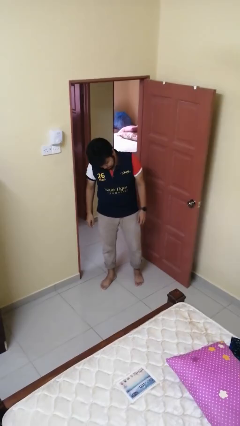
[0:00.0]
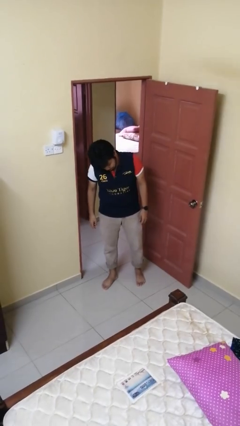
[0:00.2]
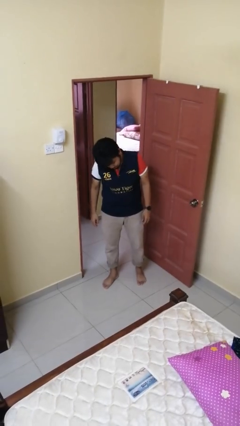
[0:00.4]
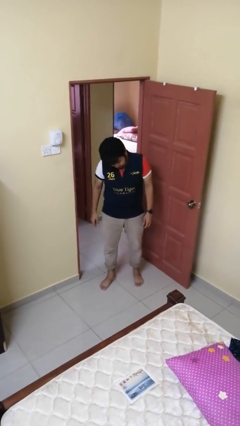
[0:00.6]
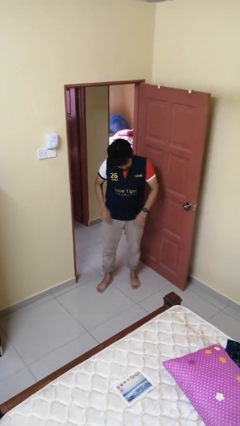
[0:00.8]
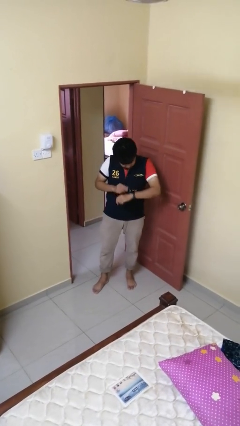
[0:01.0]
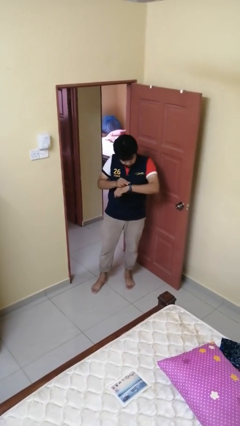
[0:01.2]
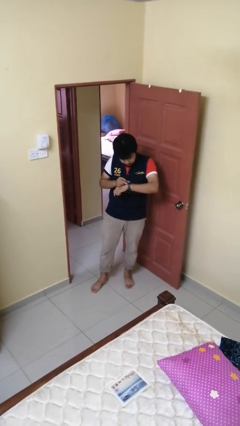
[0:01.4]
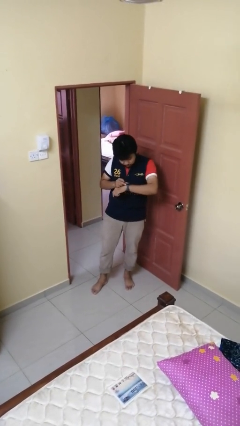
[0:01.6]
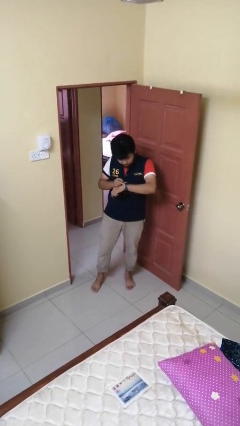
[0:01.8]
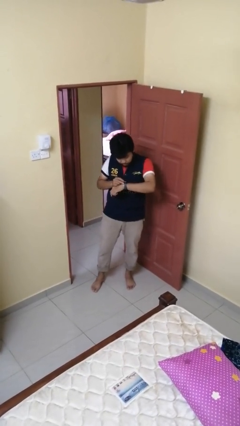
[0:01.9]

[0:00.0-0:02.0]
person looks at wristwatch

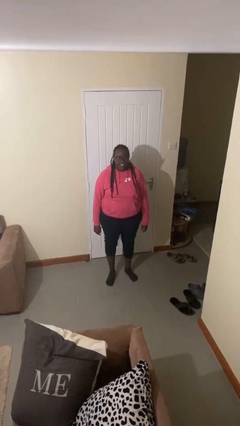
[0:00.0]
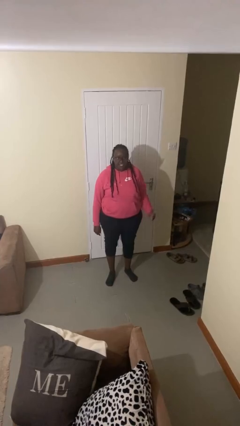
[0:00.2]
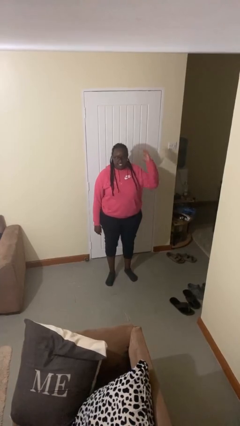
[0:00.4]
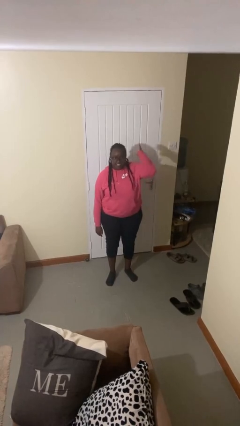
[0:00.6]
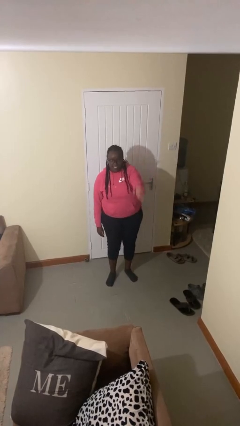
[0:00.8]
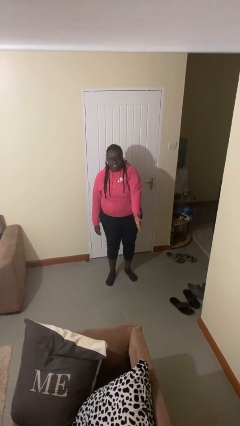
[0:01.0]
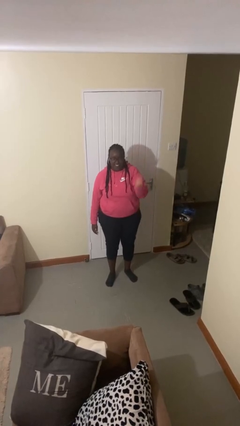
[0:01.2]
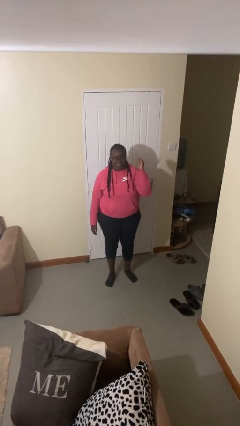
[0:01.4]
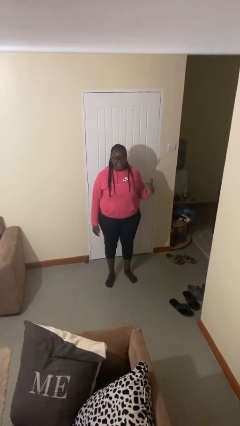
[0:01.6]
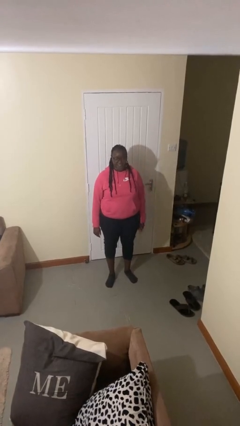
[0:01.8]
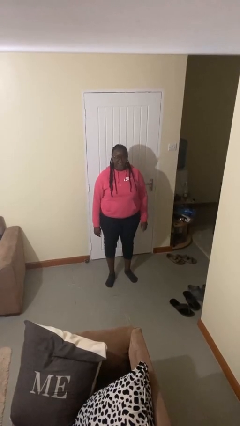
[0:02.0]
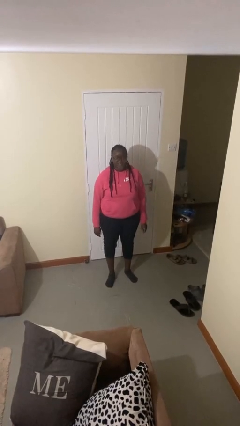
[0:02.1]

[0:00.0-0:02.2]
person karate chop

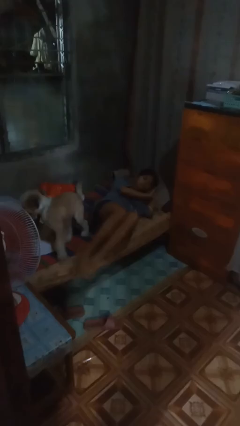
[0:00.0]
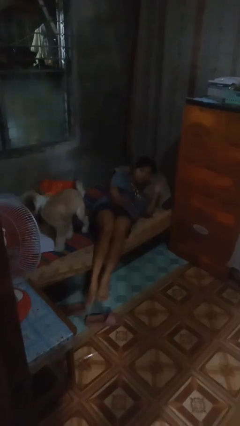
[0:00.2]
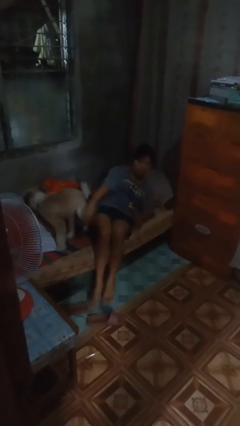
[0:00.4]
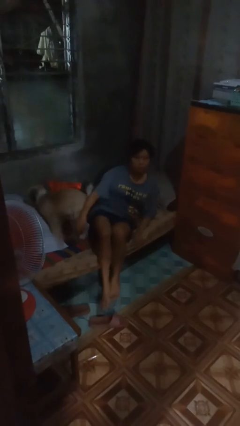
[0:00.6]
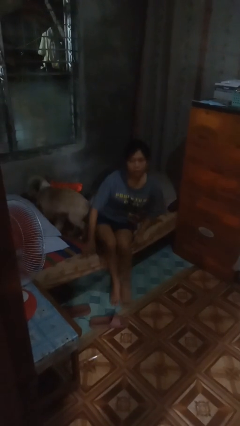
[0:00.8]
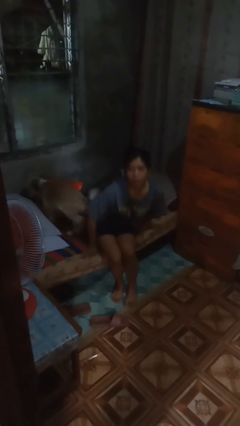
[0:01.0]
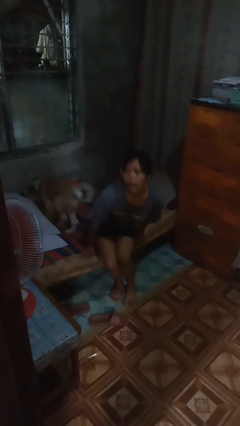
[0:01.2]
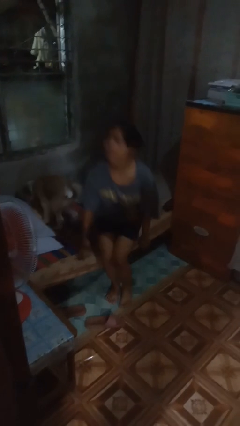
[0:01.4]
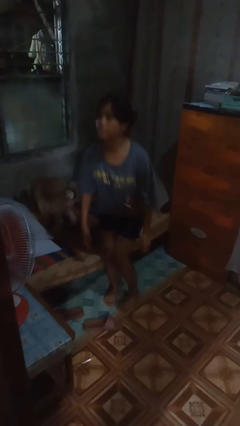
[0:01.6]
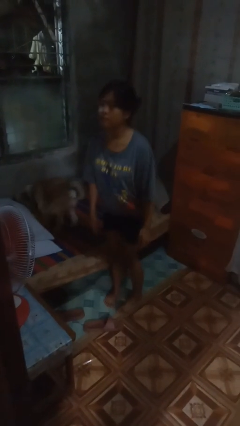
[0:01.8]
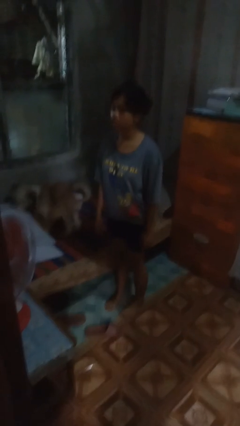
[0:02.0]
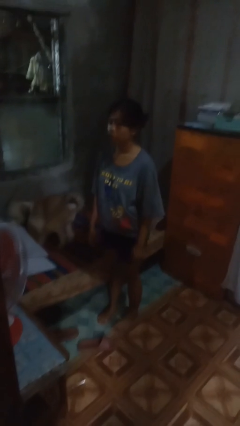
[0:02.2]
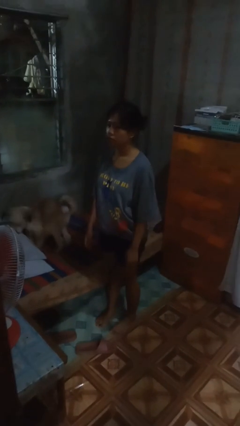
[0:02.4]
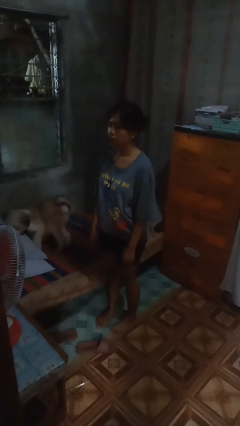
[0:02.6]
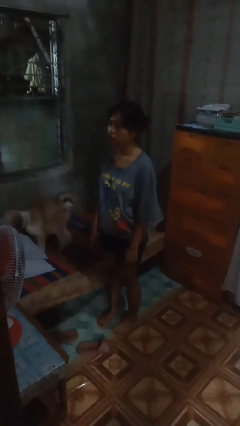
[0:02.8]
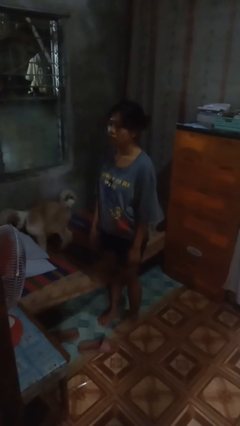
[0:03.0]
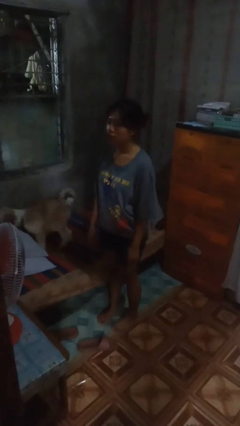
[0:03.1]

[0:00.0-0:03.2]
person stands up

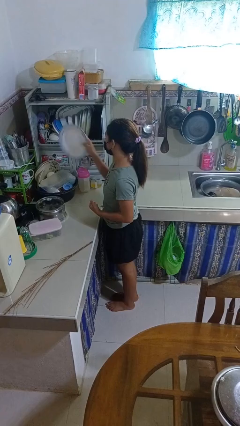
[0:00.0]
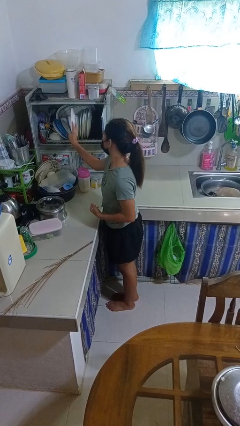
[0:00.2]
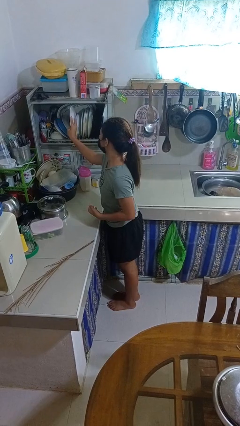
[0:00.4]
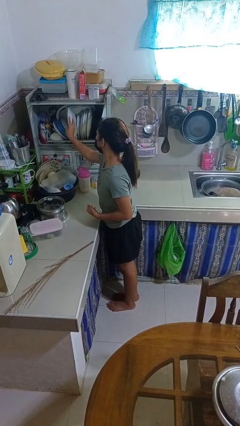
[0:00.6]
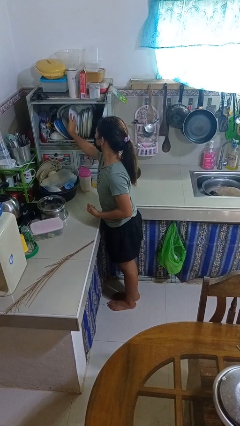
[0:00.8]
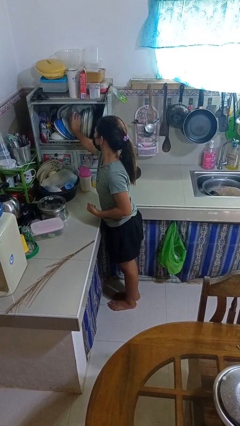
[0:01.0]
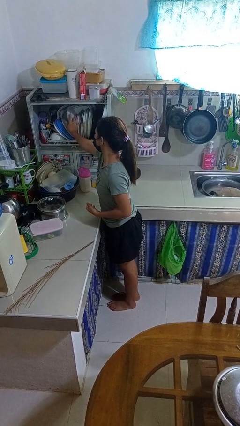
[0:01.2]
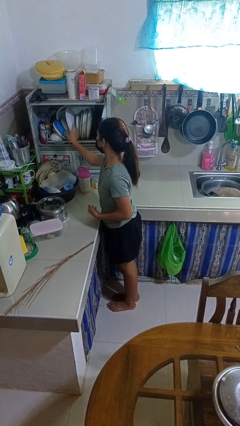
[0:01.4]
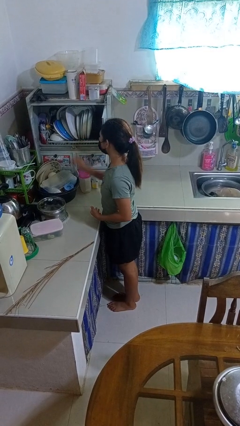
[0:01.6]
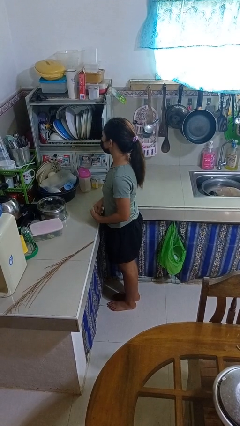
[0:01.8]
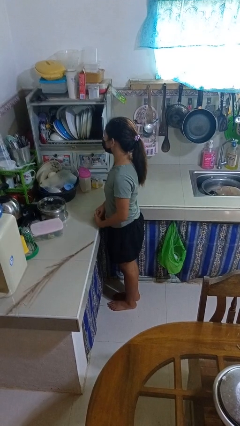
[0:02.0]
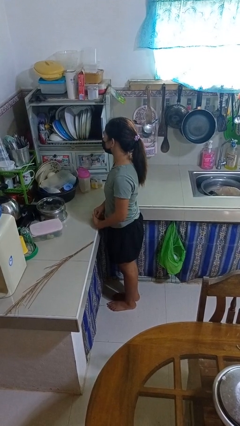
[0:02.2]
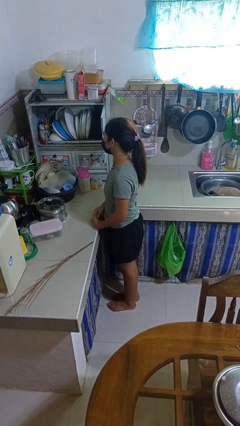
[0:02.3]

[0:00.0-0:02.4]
person puts object into kitchen drawer

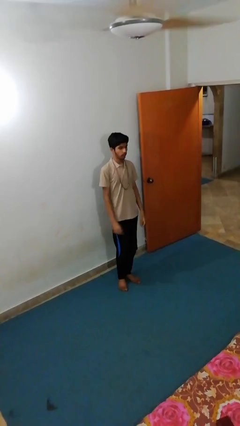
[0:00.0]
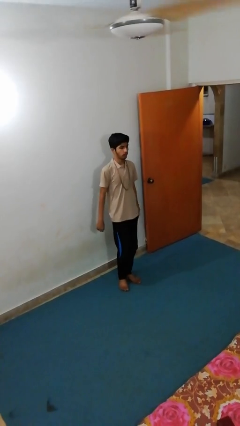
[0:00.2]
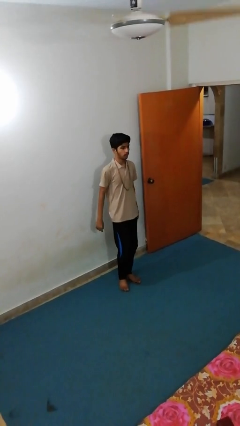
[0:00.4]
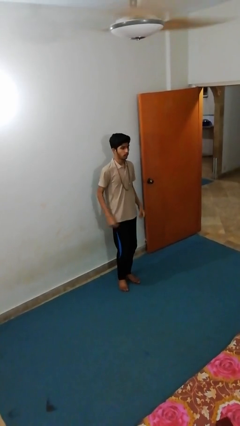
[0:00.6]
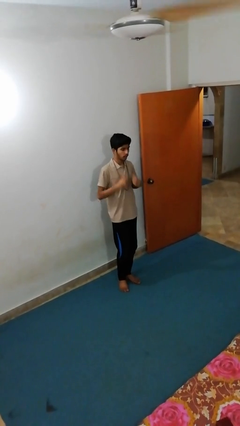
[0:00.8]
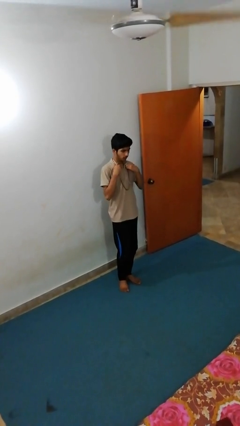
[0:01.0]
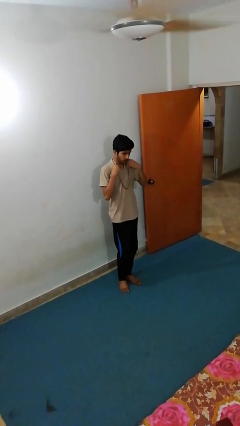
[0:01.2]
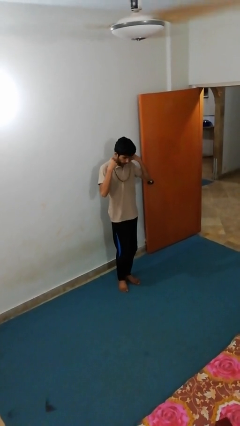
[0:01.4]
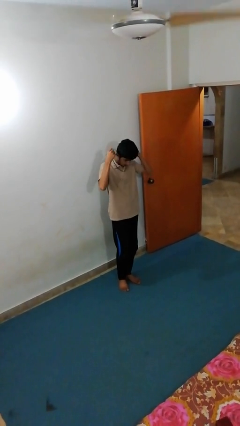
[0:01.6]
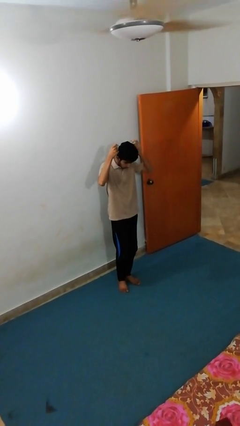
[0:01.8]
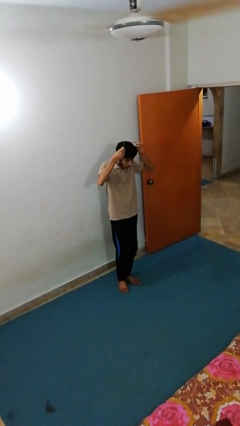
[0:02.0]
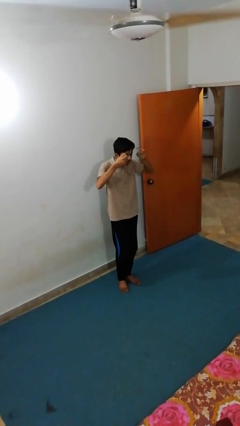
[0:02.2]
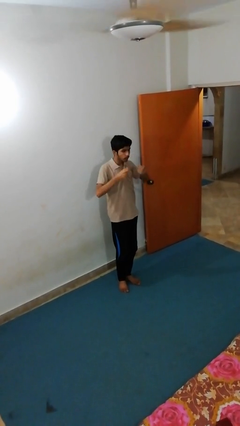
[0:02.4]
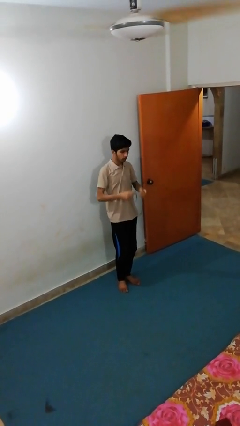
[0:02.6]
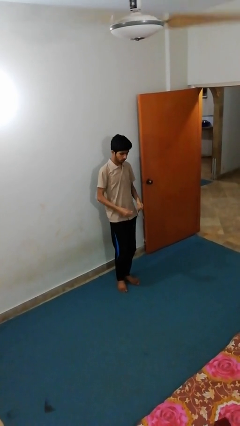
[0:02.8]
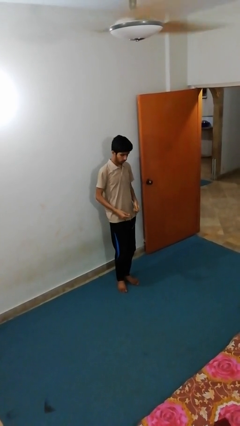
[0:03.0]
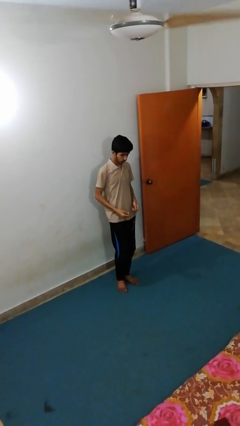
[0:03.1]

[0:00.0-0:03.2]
person takes off necklace

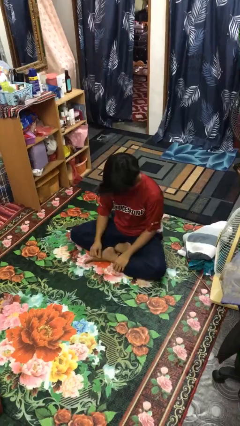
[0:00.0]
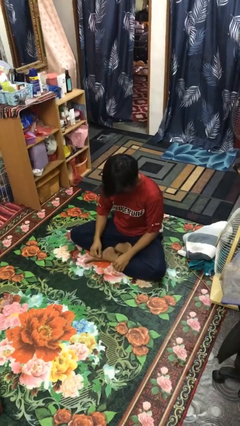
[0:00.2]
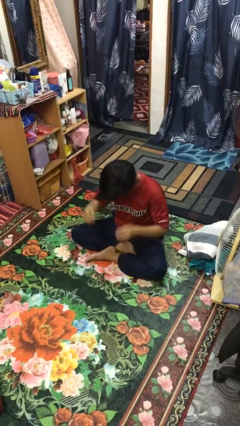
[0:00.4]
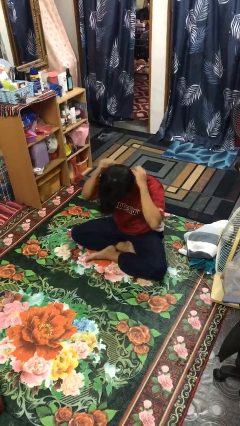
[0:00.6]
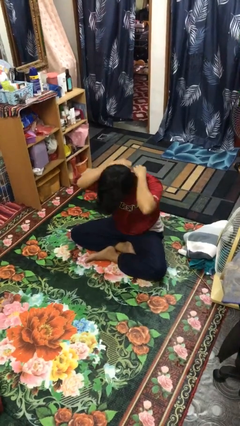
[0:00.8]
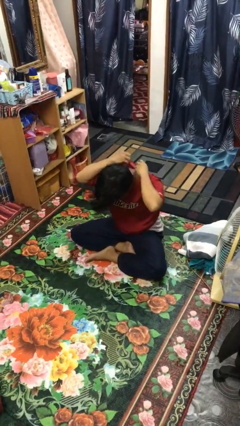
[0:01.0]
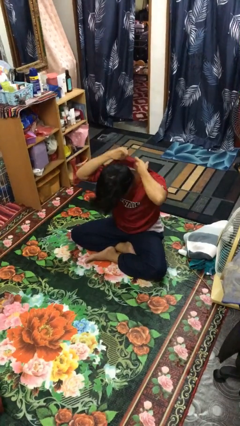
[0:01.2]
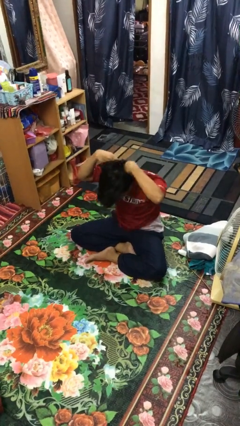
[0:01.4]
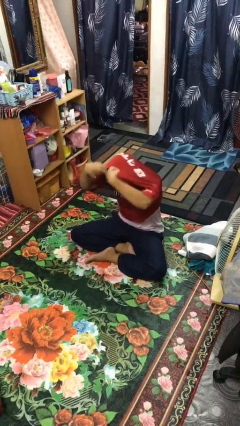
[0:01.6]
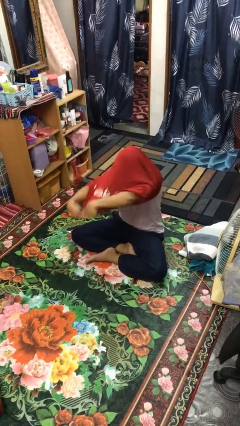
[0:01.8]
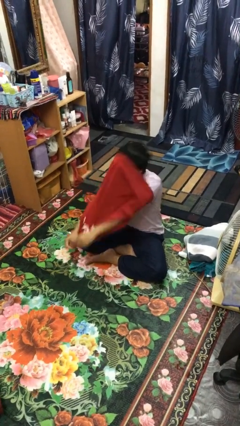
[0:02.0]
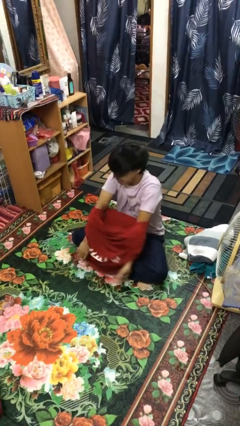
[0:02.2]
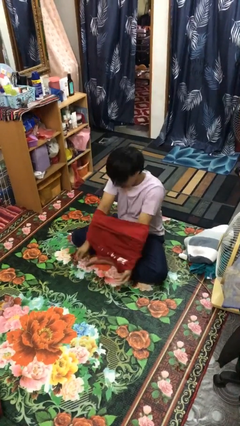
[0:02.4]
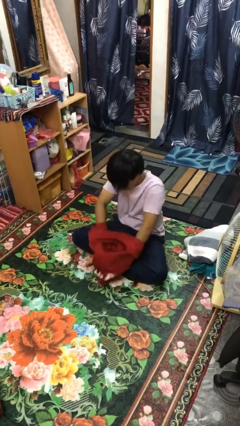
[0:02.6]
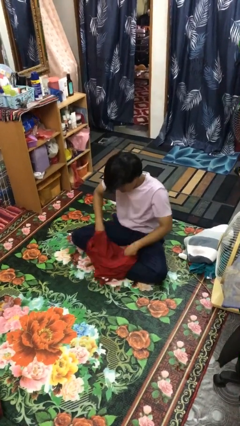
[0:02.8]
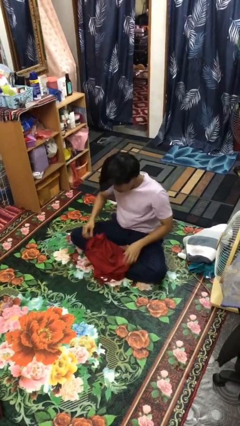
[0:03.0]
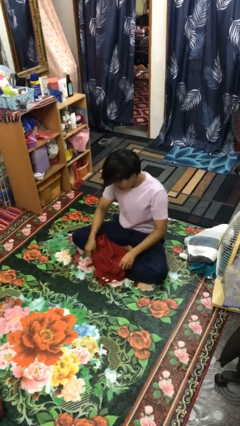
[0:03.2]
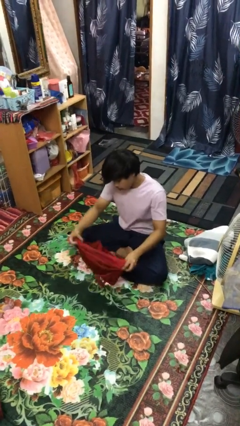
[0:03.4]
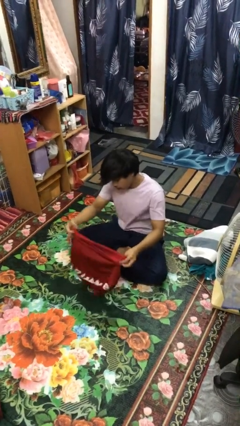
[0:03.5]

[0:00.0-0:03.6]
person takes off shirt

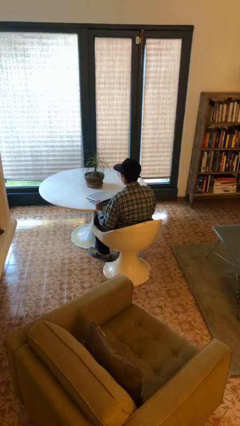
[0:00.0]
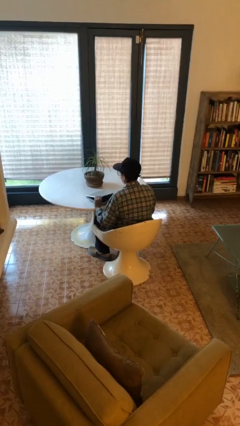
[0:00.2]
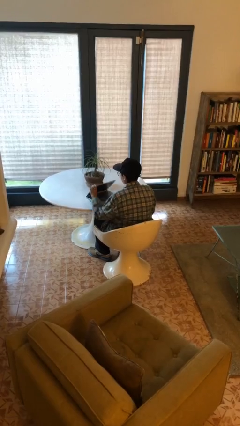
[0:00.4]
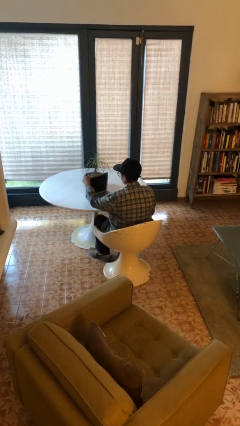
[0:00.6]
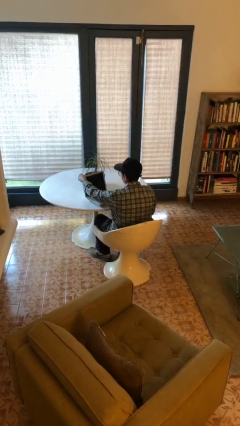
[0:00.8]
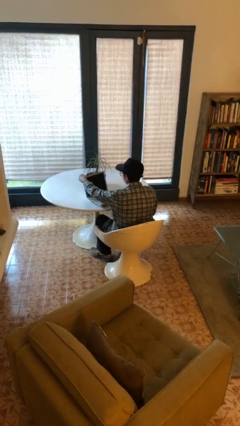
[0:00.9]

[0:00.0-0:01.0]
person opens laptop
